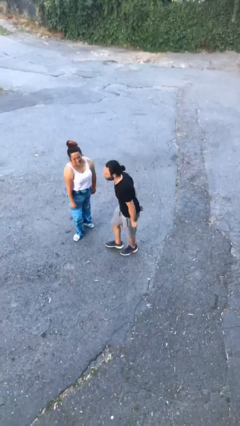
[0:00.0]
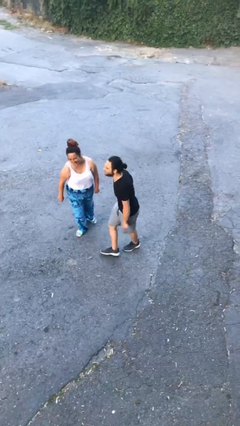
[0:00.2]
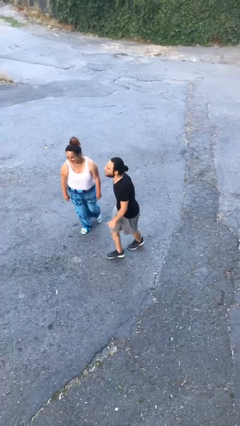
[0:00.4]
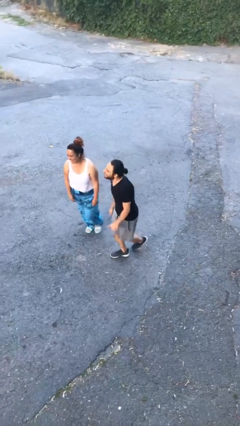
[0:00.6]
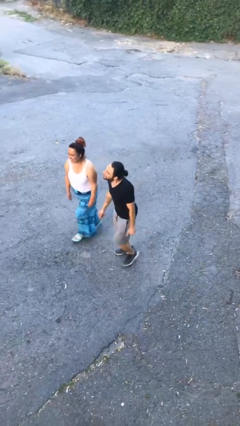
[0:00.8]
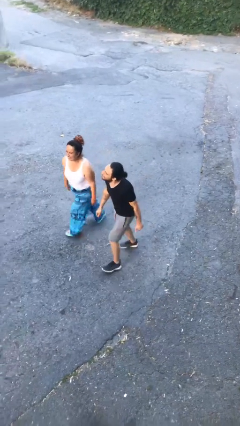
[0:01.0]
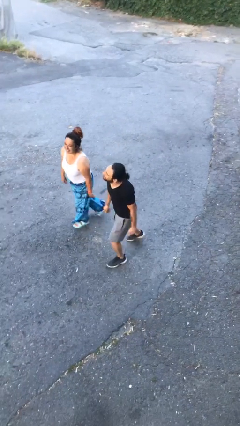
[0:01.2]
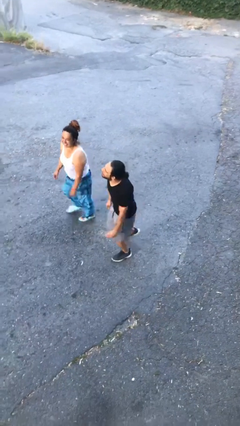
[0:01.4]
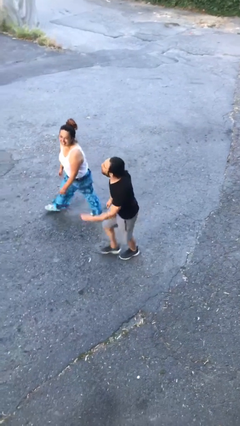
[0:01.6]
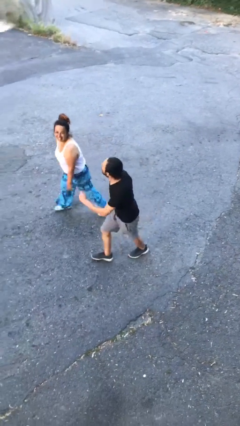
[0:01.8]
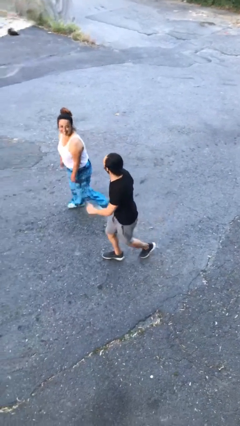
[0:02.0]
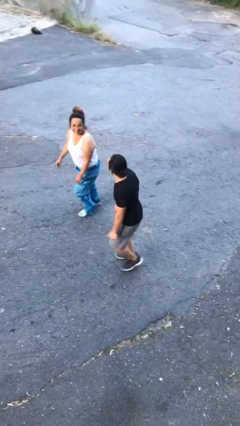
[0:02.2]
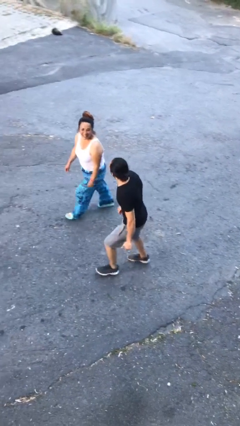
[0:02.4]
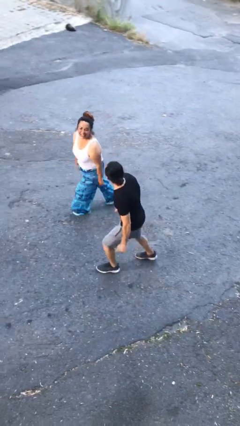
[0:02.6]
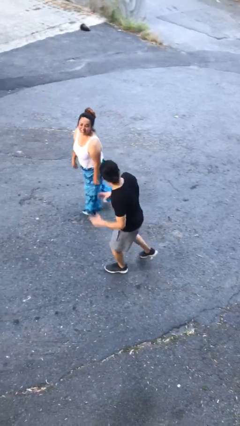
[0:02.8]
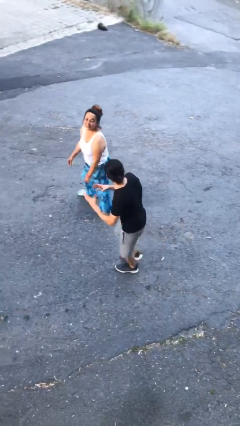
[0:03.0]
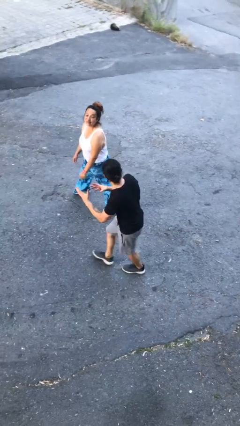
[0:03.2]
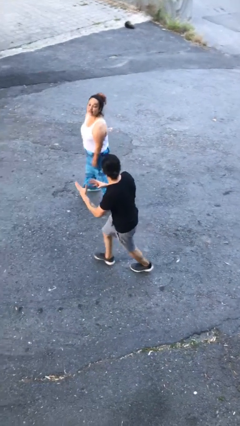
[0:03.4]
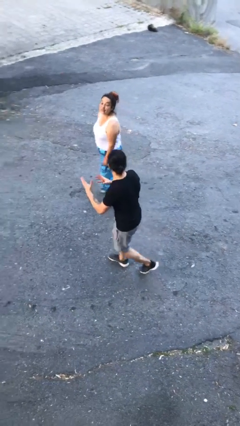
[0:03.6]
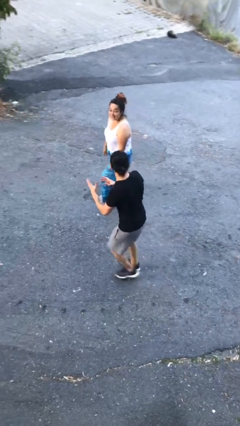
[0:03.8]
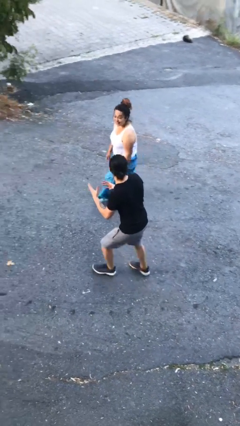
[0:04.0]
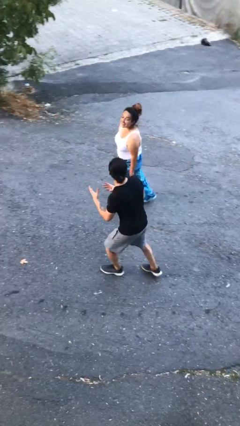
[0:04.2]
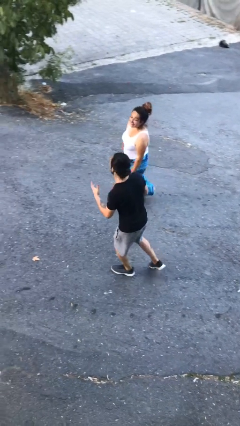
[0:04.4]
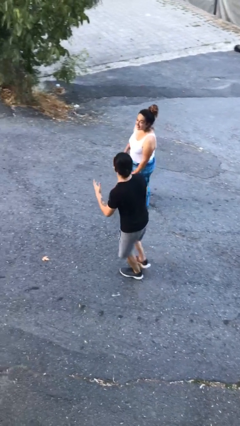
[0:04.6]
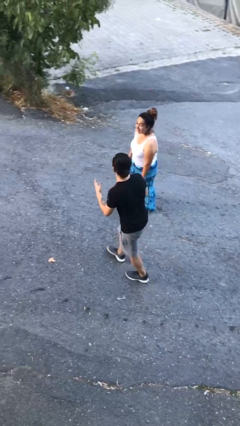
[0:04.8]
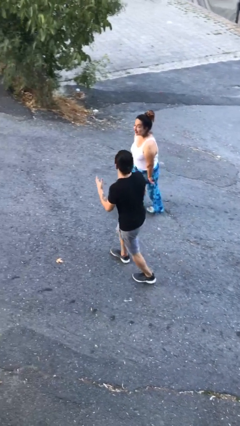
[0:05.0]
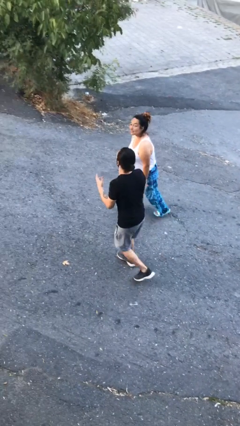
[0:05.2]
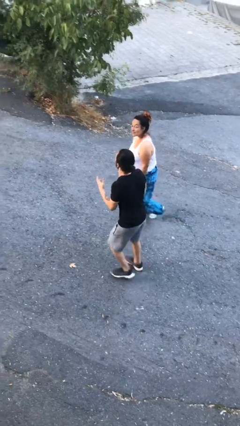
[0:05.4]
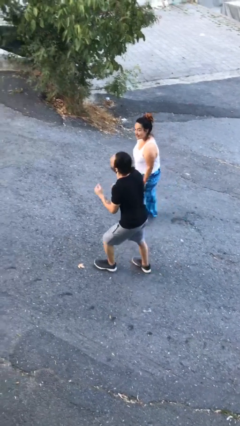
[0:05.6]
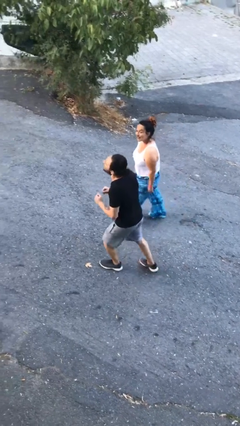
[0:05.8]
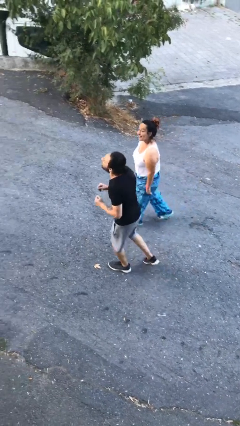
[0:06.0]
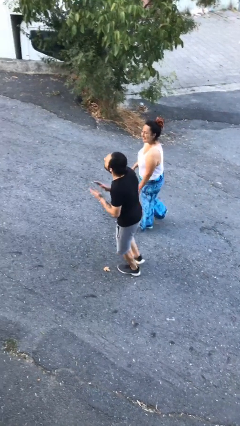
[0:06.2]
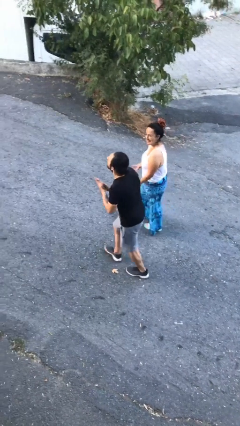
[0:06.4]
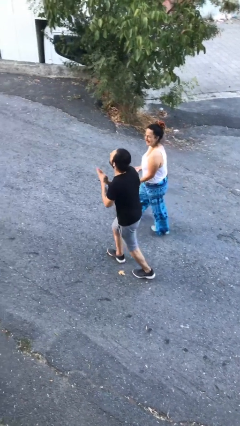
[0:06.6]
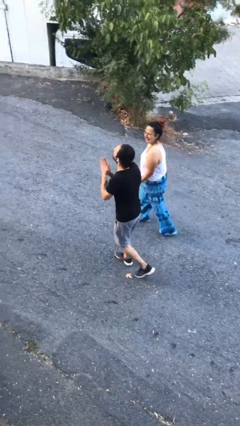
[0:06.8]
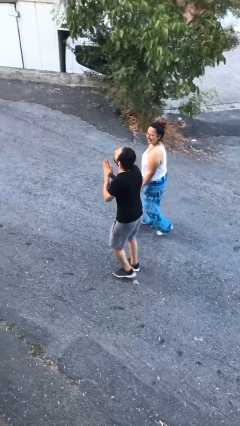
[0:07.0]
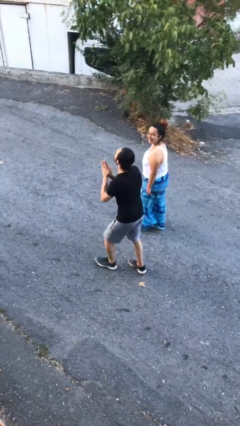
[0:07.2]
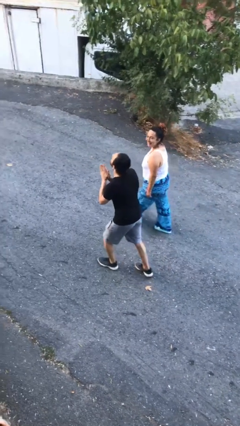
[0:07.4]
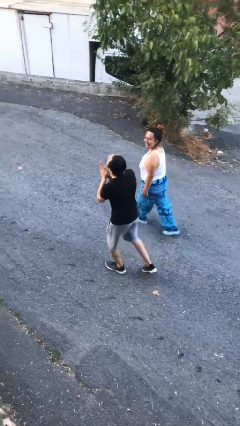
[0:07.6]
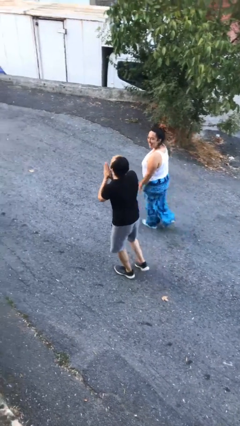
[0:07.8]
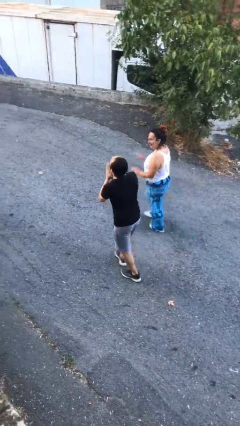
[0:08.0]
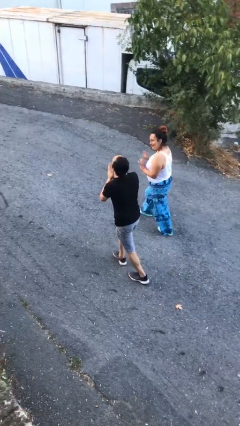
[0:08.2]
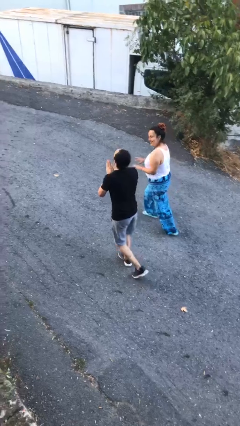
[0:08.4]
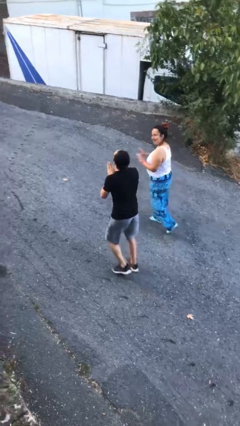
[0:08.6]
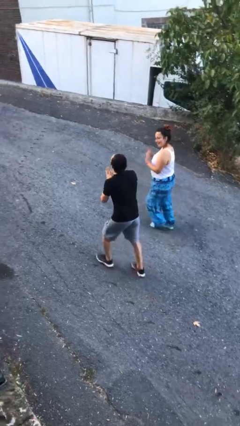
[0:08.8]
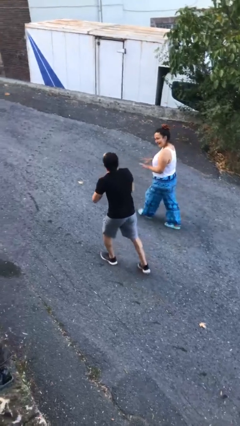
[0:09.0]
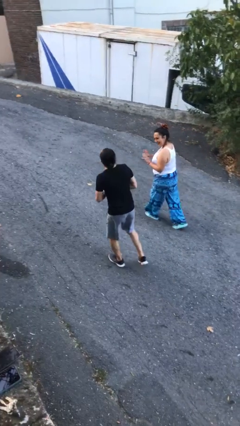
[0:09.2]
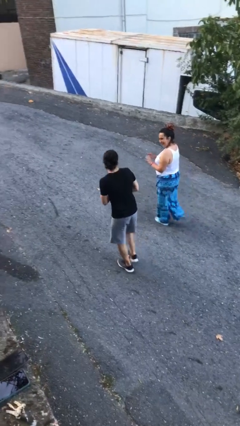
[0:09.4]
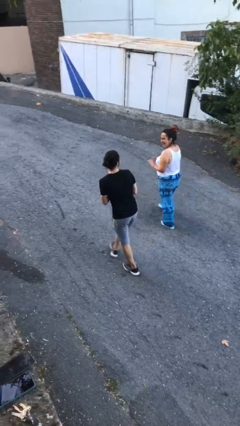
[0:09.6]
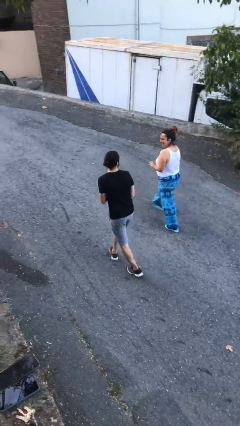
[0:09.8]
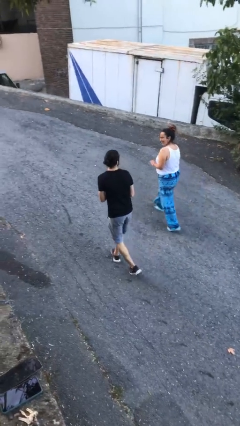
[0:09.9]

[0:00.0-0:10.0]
person talks to person

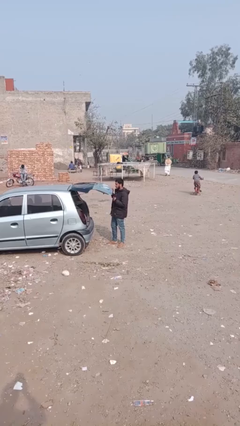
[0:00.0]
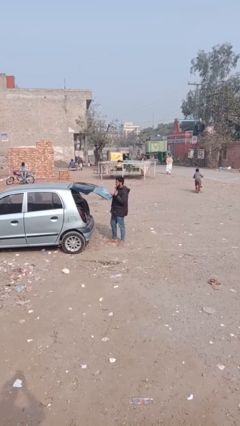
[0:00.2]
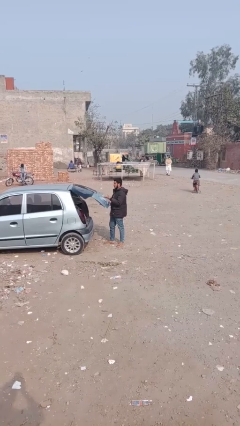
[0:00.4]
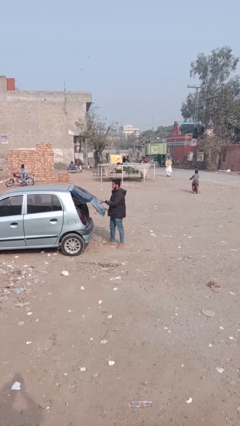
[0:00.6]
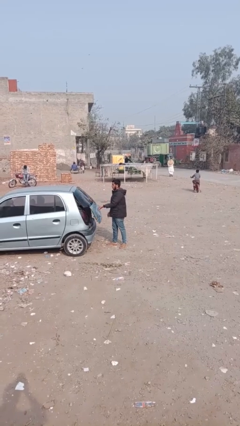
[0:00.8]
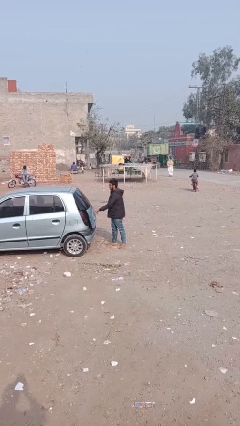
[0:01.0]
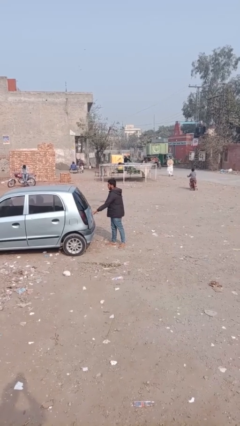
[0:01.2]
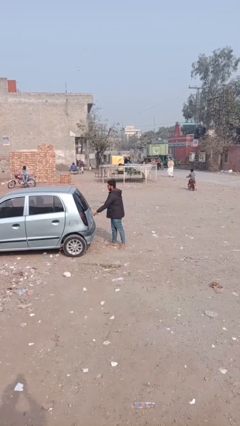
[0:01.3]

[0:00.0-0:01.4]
person closes car trunk

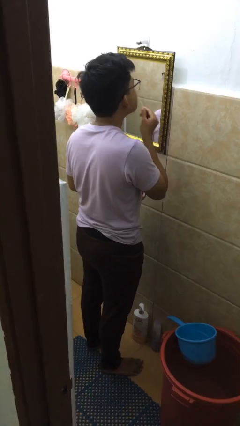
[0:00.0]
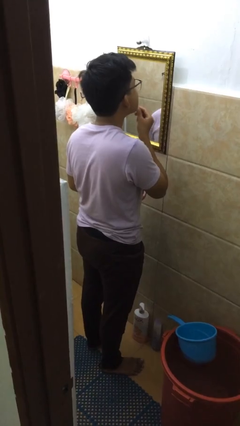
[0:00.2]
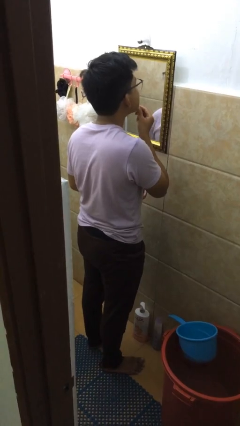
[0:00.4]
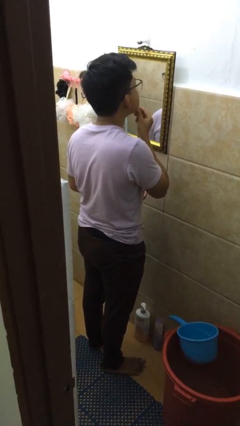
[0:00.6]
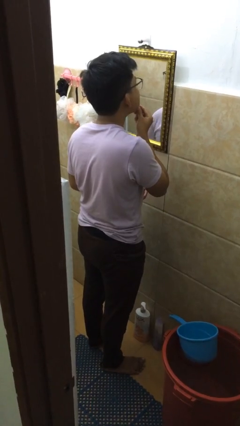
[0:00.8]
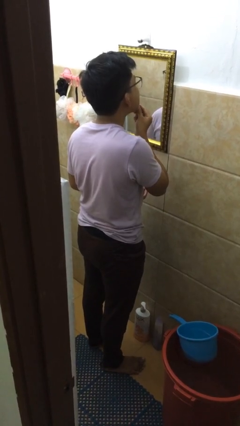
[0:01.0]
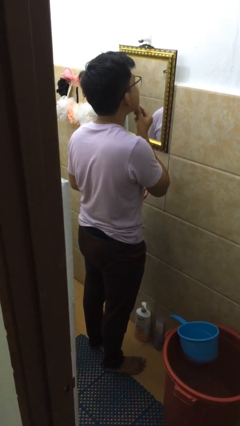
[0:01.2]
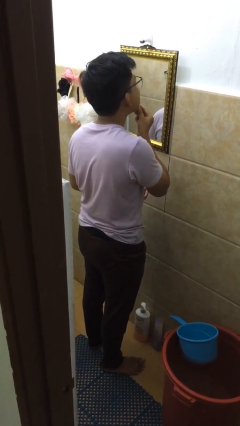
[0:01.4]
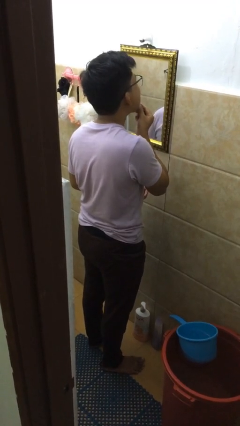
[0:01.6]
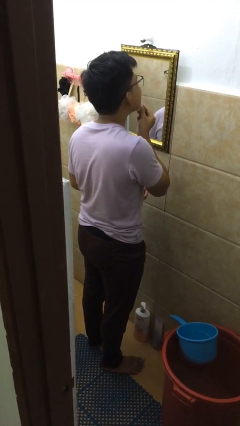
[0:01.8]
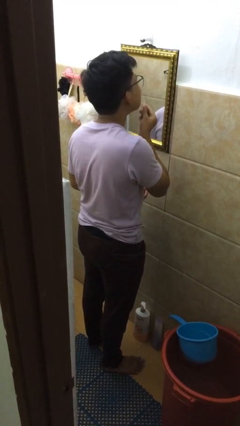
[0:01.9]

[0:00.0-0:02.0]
person flosses

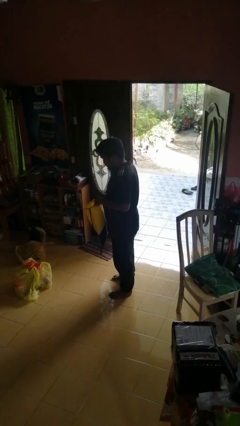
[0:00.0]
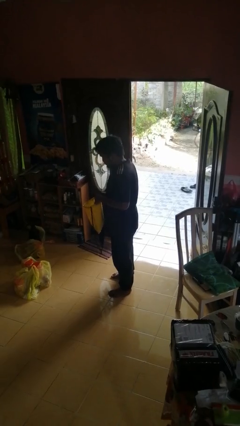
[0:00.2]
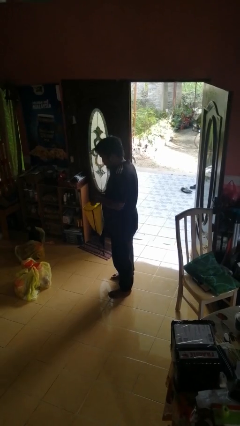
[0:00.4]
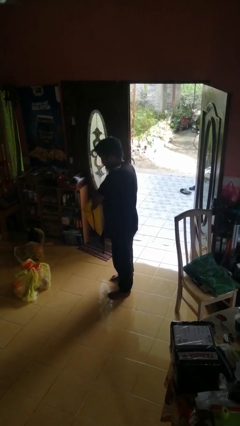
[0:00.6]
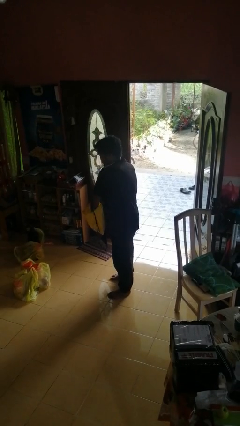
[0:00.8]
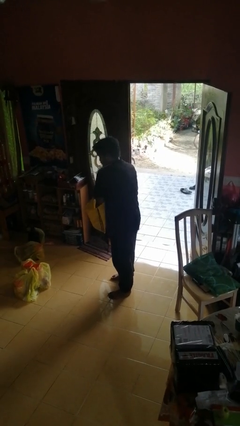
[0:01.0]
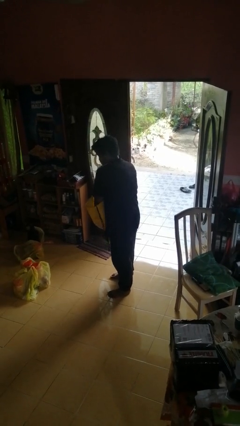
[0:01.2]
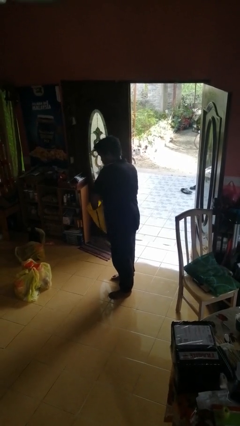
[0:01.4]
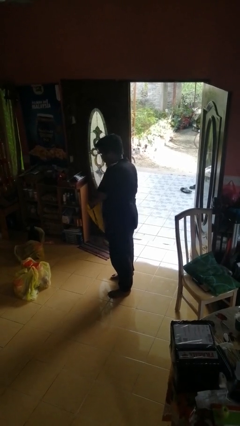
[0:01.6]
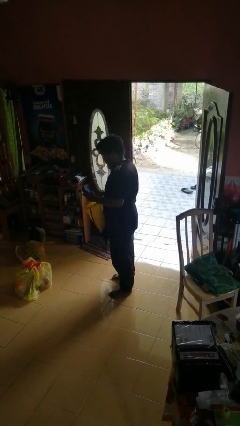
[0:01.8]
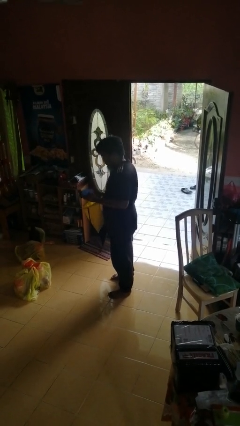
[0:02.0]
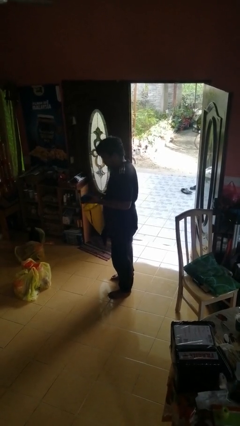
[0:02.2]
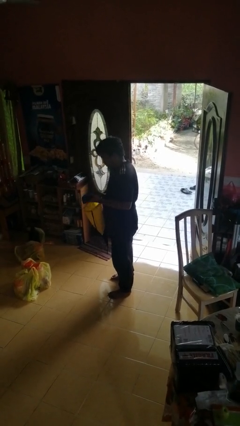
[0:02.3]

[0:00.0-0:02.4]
person takes object from bag

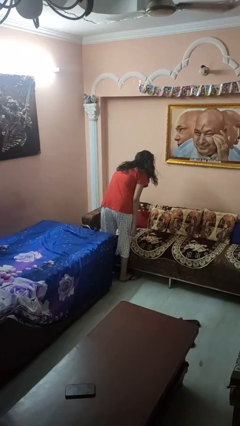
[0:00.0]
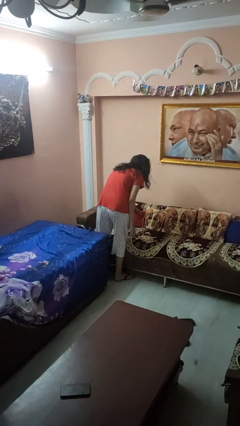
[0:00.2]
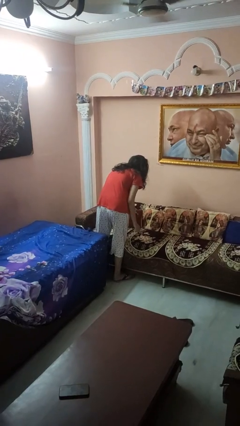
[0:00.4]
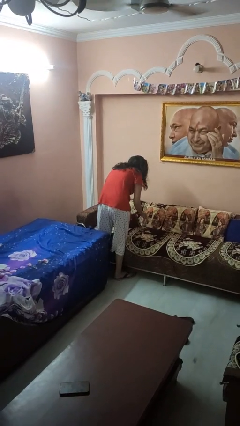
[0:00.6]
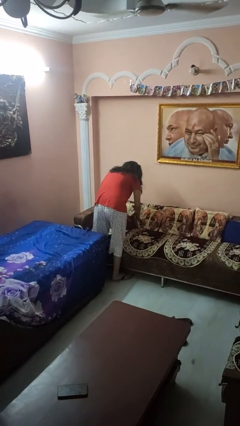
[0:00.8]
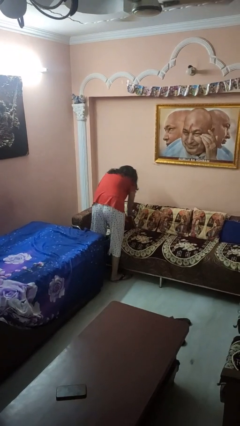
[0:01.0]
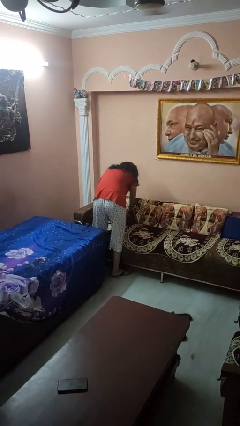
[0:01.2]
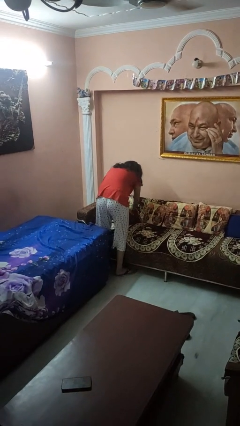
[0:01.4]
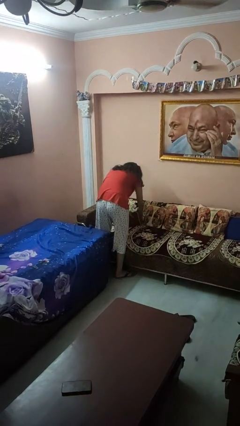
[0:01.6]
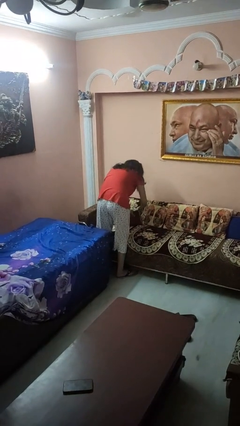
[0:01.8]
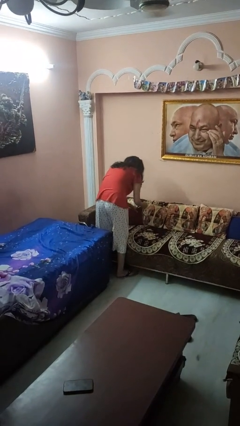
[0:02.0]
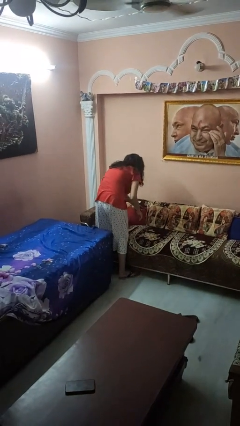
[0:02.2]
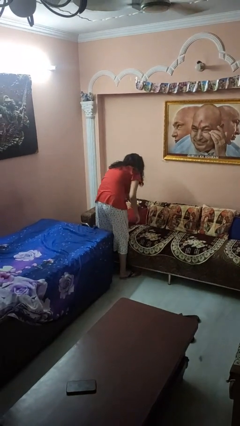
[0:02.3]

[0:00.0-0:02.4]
person searches in couch
